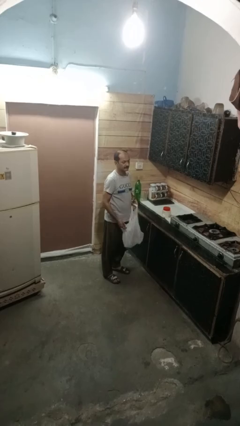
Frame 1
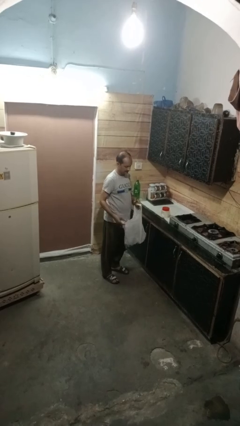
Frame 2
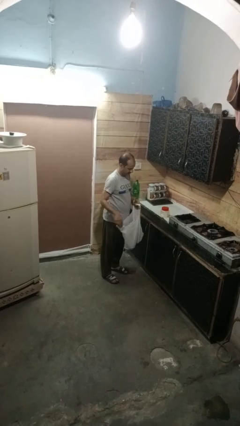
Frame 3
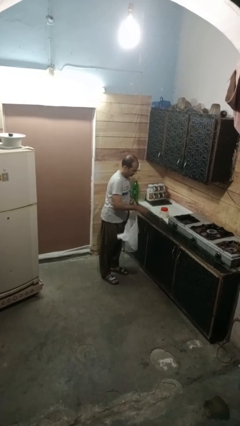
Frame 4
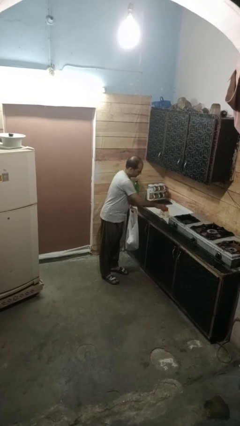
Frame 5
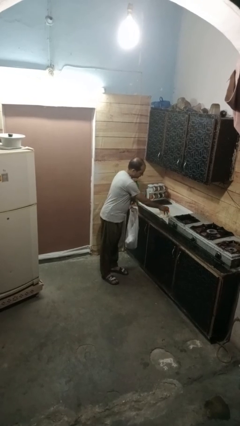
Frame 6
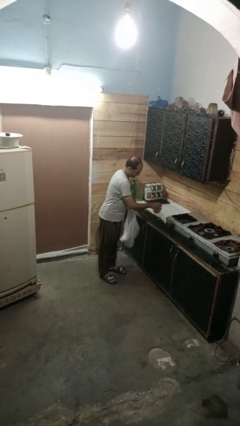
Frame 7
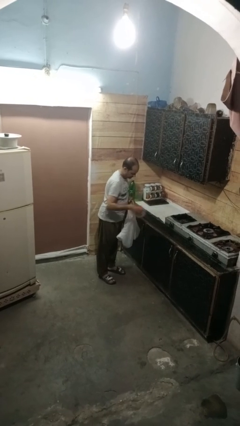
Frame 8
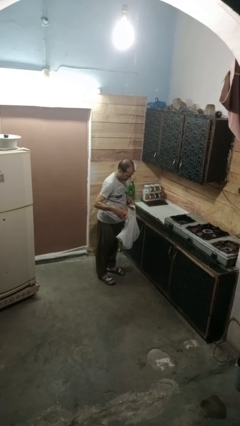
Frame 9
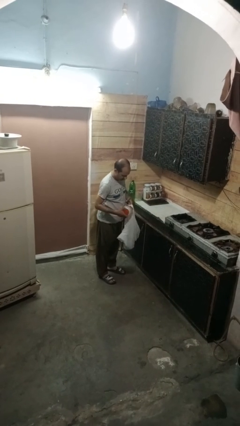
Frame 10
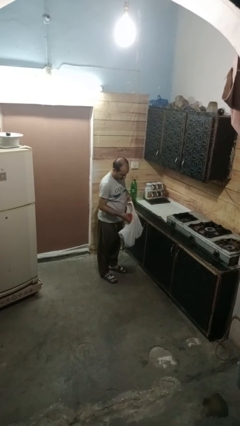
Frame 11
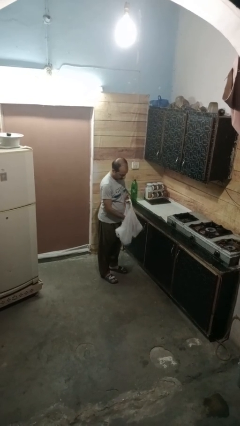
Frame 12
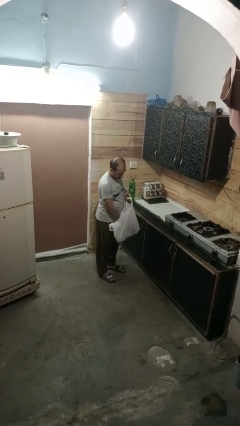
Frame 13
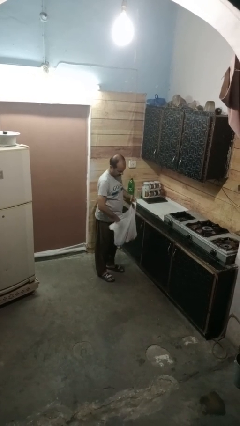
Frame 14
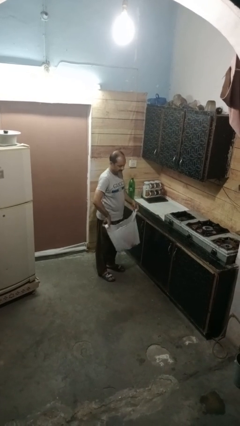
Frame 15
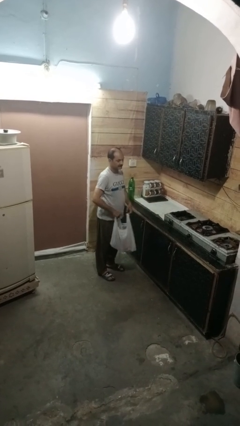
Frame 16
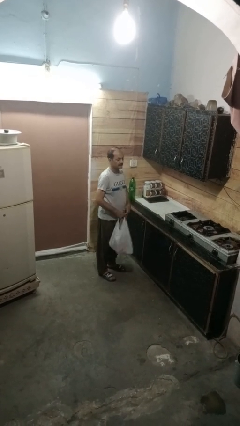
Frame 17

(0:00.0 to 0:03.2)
person puts object into bag

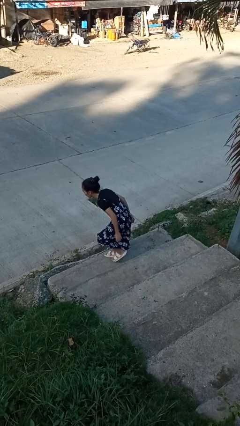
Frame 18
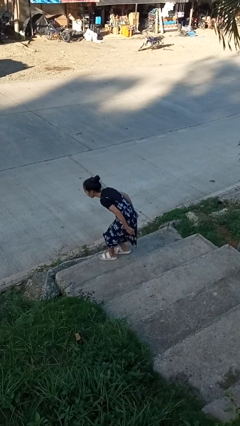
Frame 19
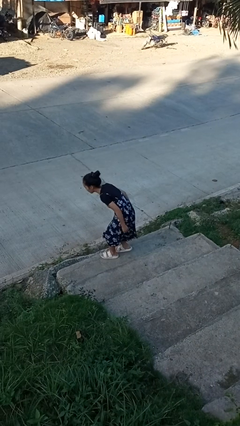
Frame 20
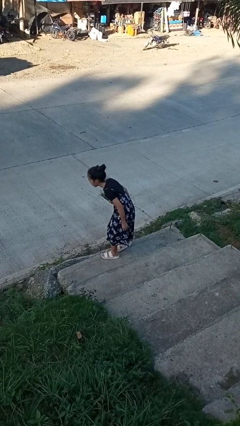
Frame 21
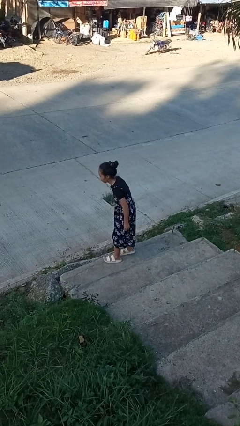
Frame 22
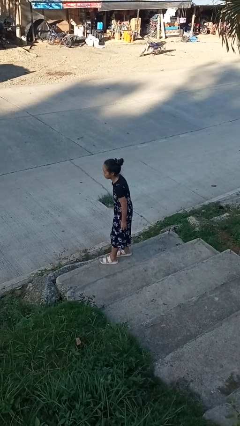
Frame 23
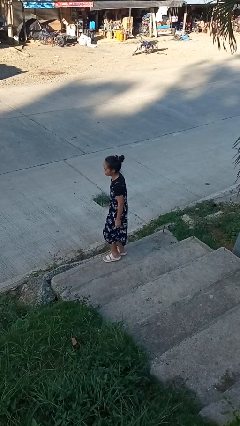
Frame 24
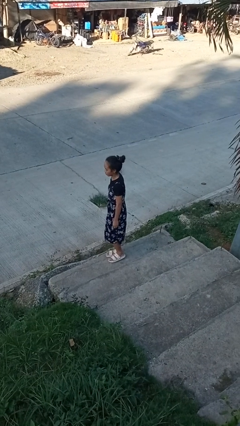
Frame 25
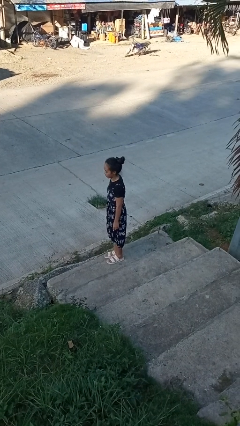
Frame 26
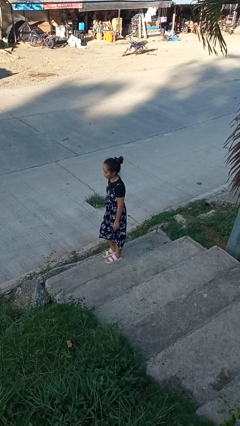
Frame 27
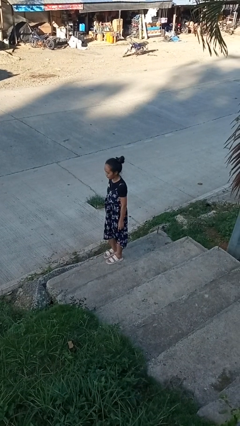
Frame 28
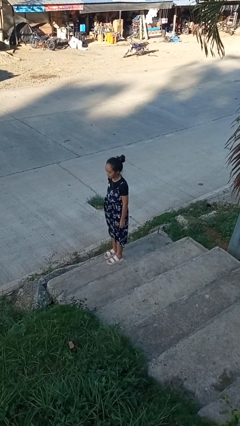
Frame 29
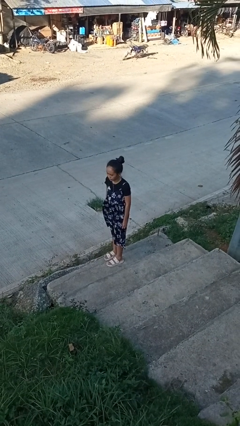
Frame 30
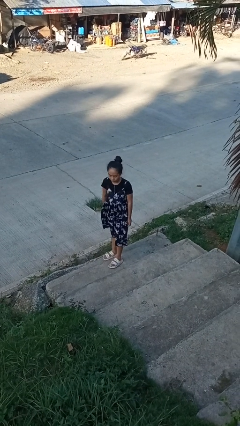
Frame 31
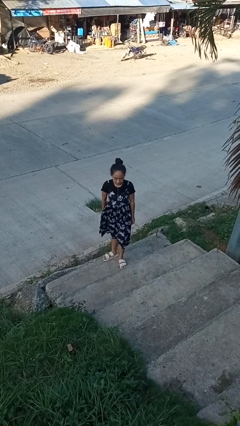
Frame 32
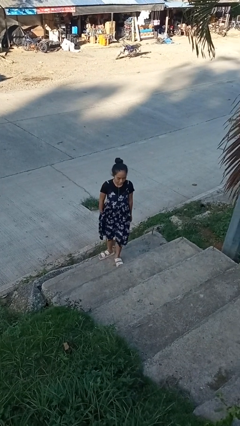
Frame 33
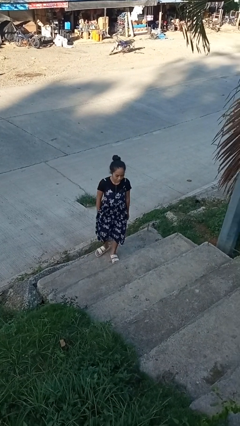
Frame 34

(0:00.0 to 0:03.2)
person trips on stair

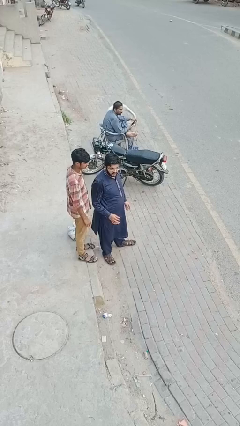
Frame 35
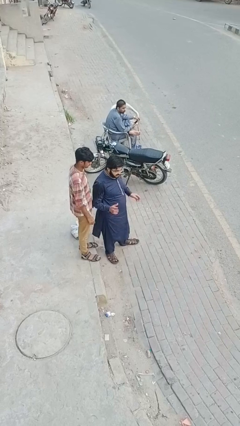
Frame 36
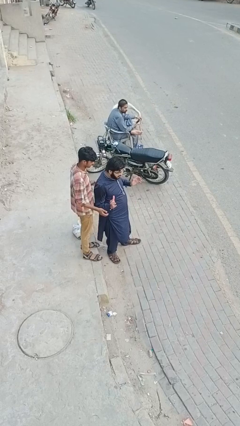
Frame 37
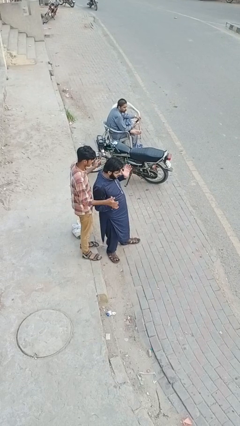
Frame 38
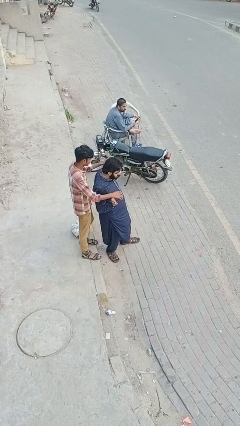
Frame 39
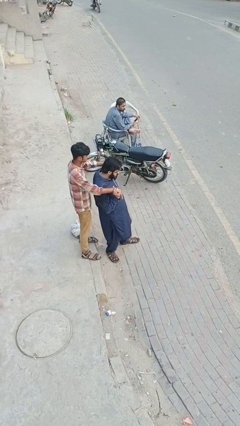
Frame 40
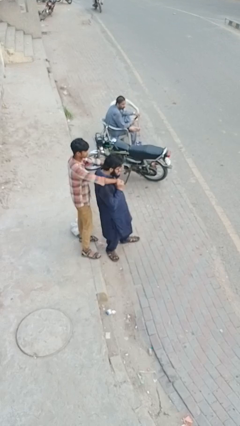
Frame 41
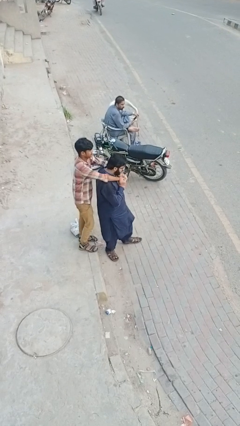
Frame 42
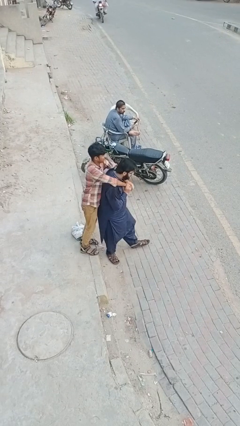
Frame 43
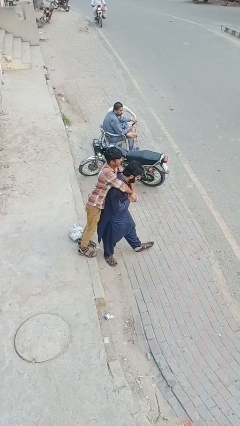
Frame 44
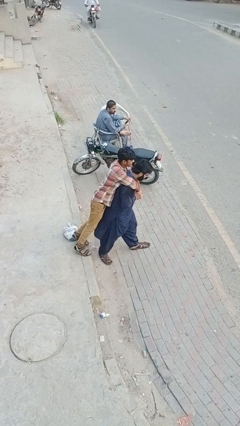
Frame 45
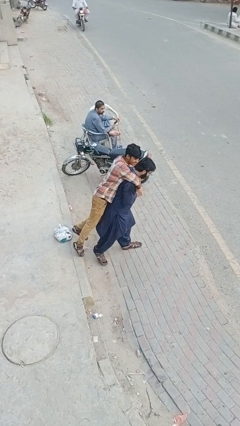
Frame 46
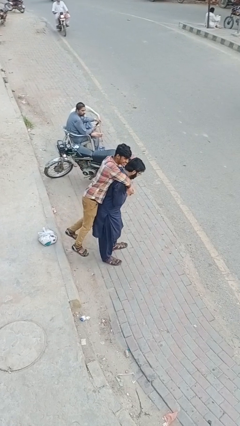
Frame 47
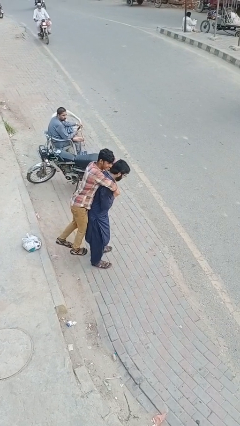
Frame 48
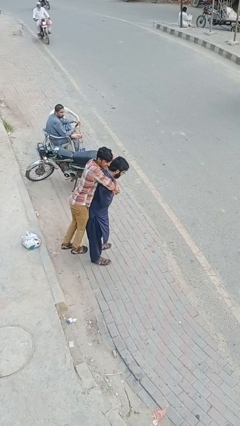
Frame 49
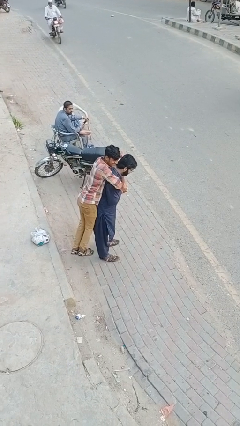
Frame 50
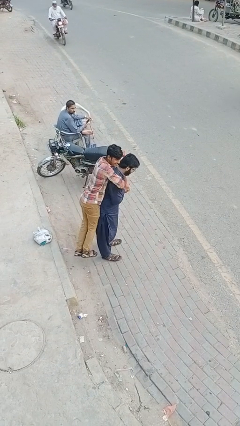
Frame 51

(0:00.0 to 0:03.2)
person carries person over shoulder

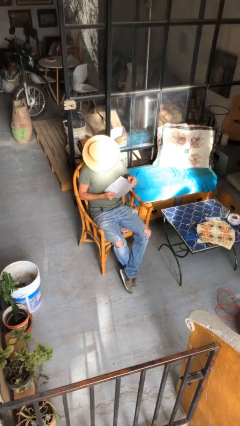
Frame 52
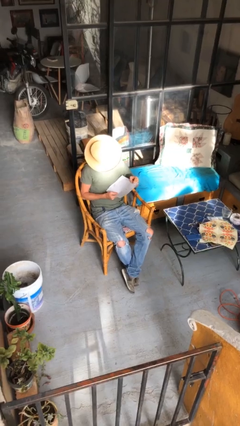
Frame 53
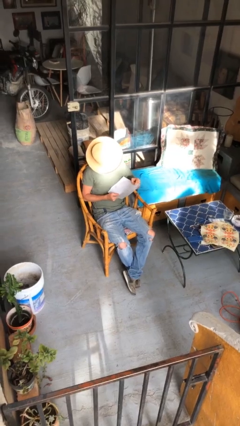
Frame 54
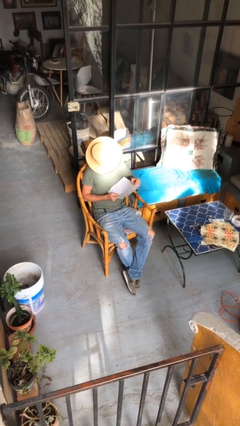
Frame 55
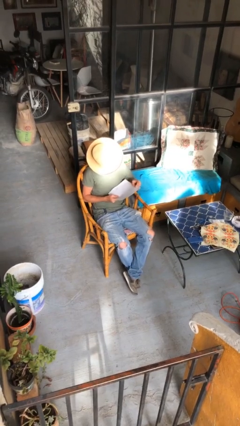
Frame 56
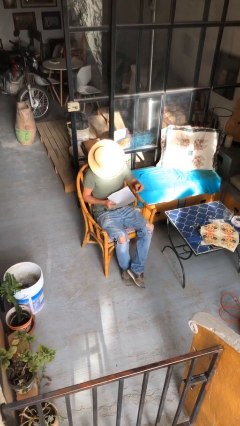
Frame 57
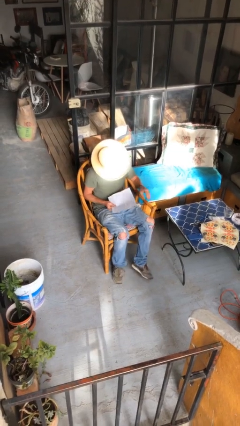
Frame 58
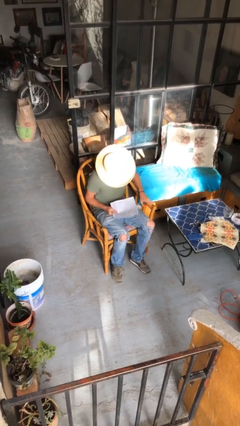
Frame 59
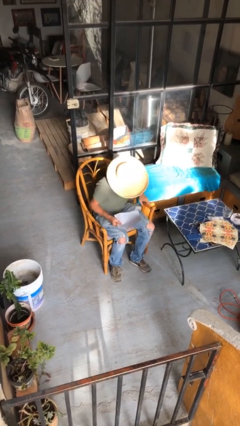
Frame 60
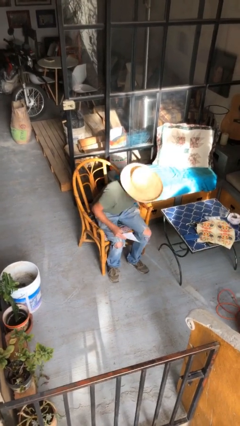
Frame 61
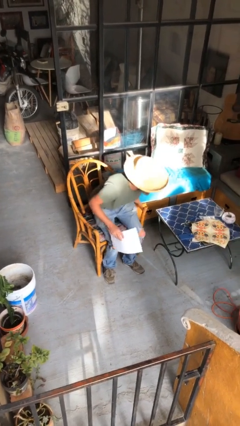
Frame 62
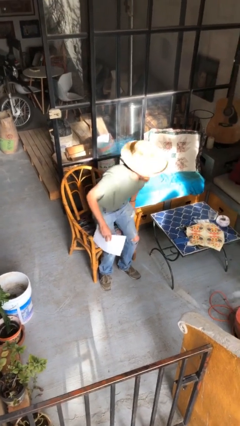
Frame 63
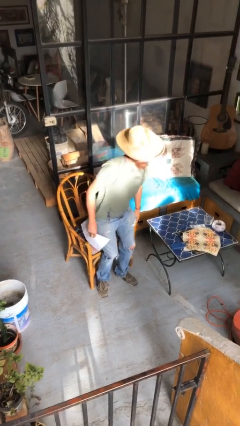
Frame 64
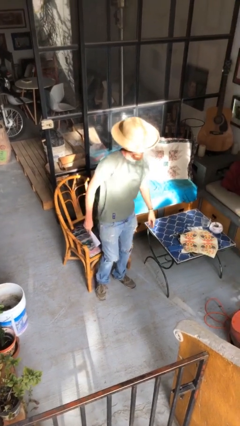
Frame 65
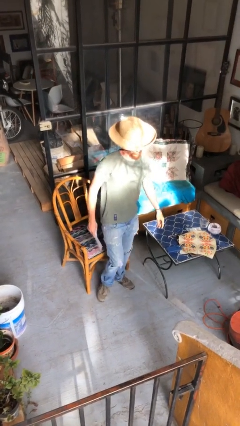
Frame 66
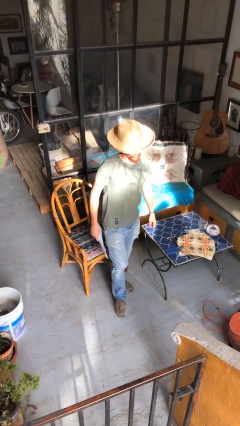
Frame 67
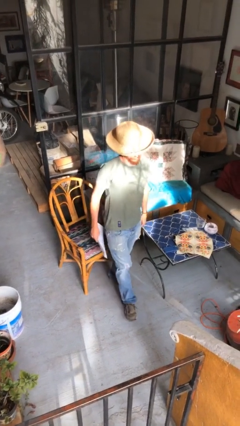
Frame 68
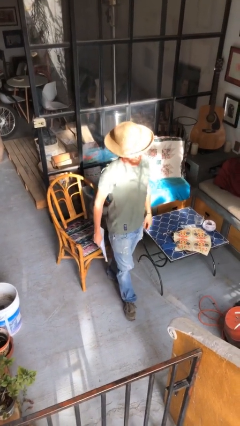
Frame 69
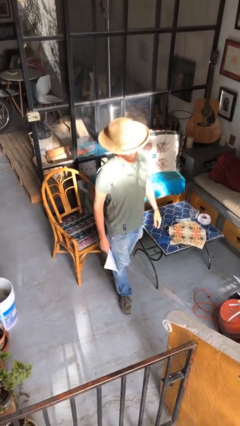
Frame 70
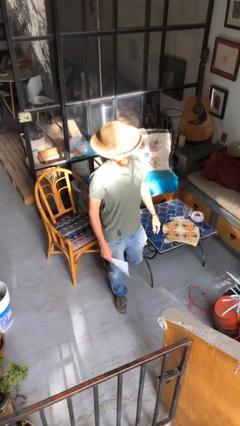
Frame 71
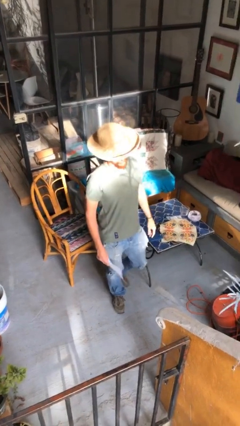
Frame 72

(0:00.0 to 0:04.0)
person stands up

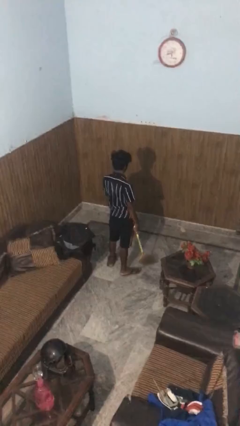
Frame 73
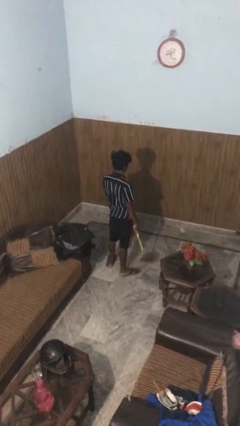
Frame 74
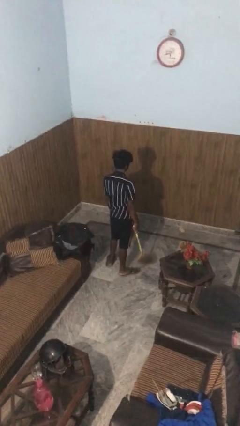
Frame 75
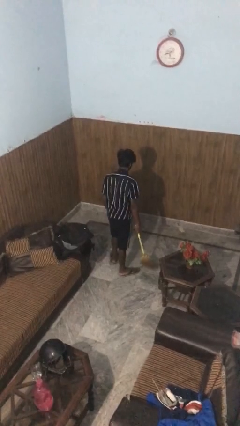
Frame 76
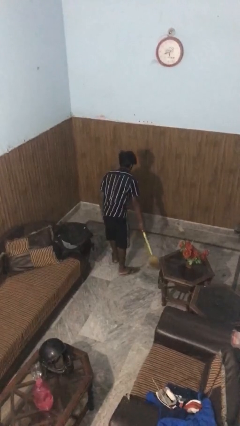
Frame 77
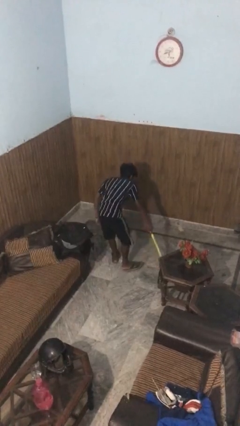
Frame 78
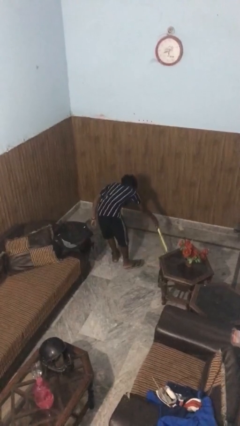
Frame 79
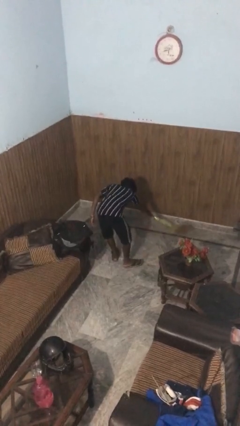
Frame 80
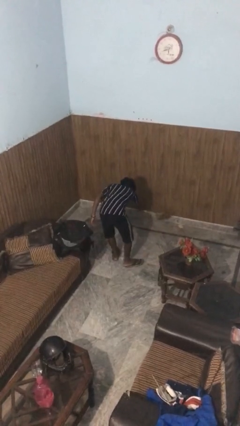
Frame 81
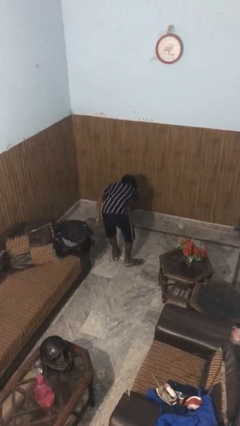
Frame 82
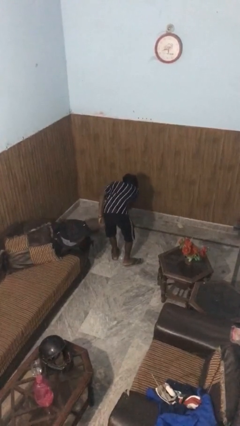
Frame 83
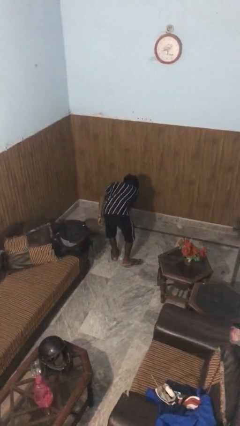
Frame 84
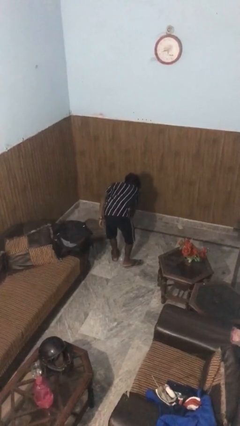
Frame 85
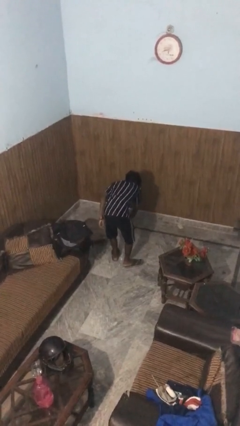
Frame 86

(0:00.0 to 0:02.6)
person sweeps floor

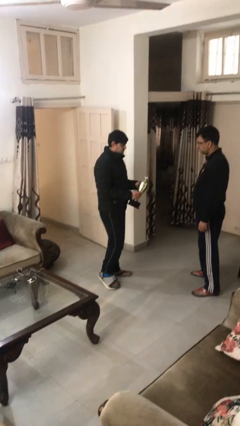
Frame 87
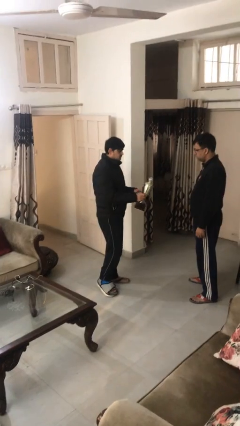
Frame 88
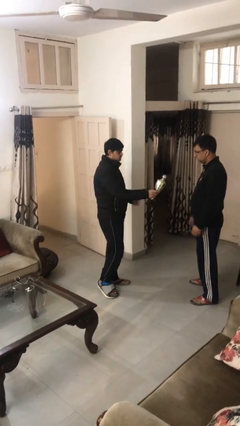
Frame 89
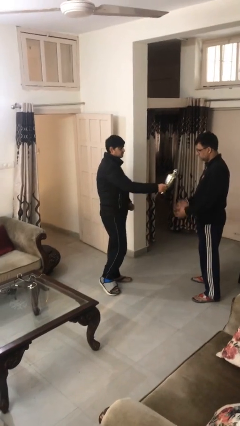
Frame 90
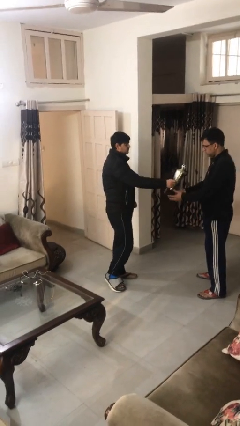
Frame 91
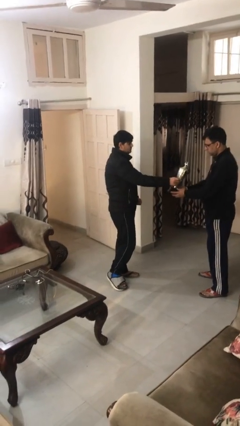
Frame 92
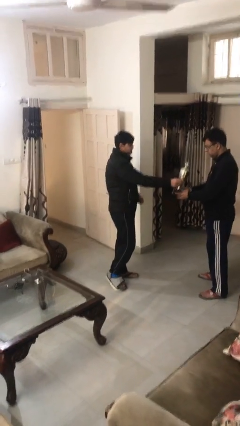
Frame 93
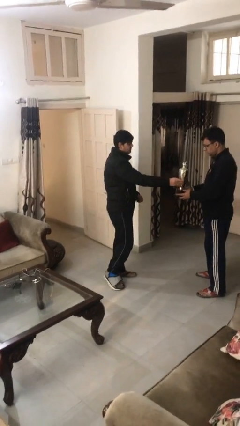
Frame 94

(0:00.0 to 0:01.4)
person transfers object to person

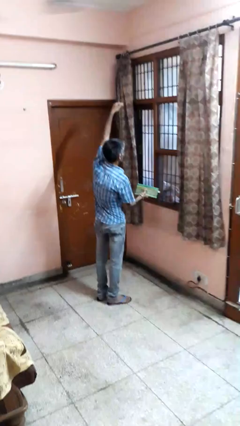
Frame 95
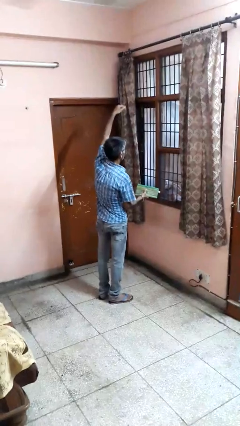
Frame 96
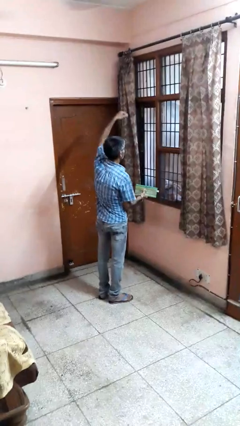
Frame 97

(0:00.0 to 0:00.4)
person catches dropped object
